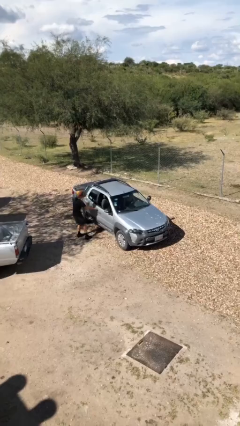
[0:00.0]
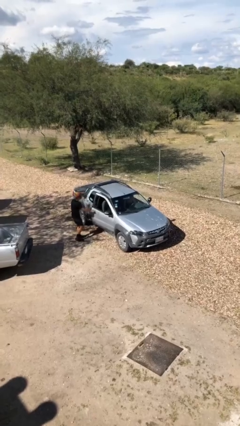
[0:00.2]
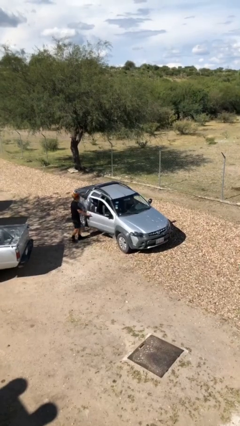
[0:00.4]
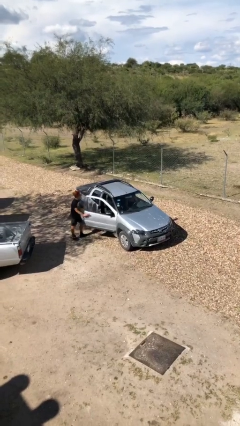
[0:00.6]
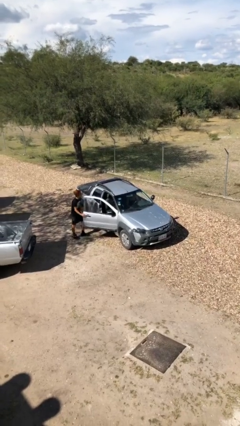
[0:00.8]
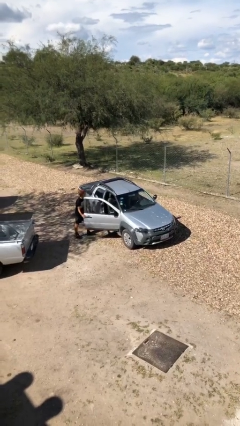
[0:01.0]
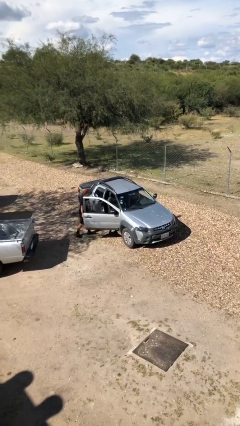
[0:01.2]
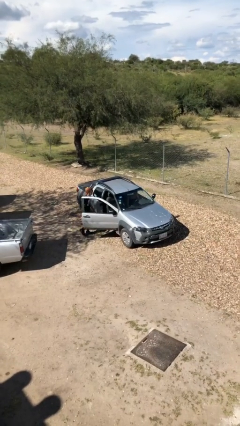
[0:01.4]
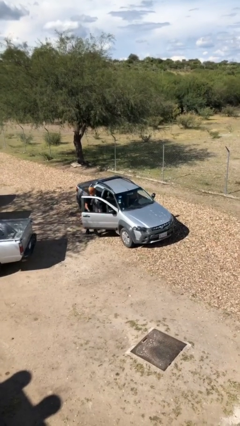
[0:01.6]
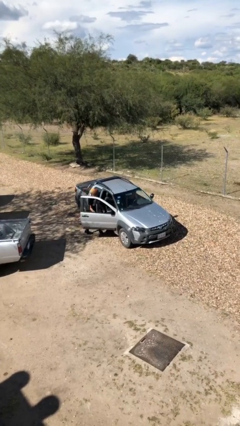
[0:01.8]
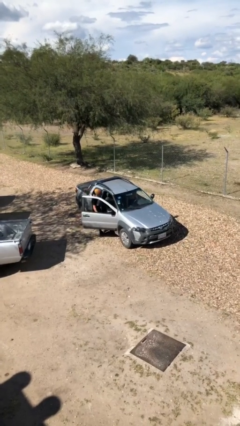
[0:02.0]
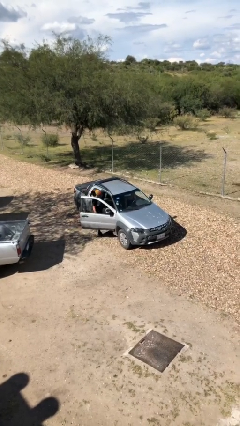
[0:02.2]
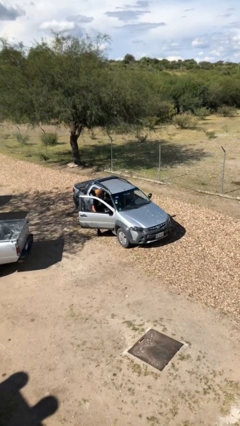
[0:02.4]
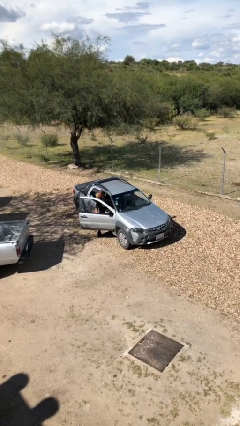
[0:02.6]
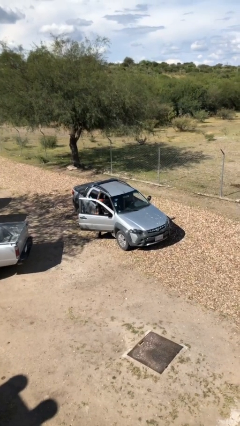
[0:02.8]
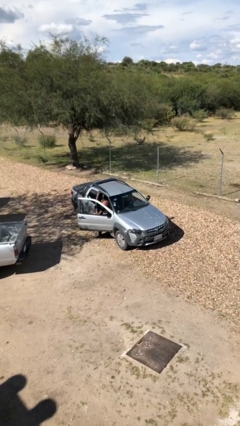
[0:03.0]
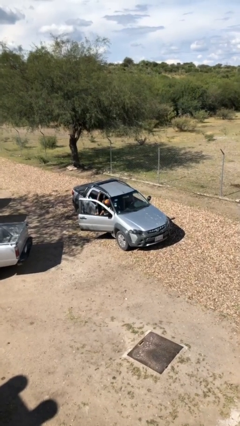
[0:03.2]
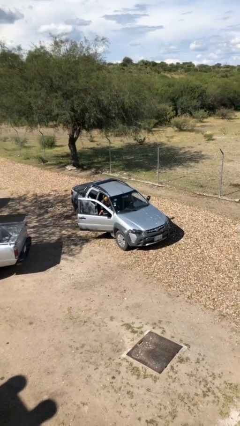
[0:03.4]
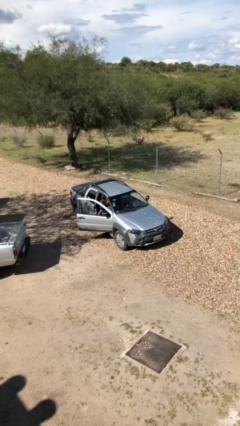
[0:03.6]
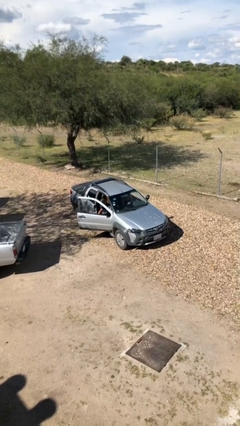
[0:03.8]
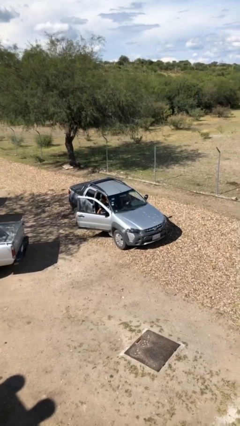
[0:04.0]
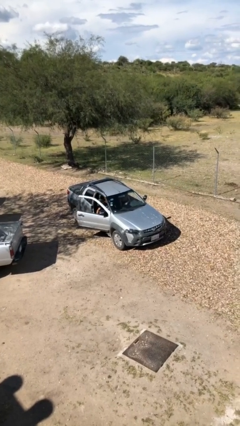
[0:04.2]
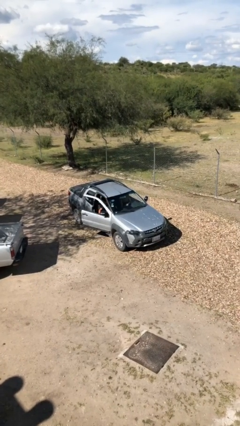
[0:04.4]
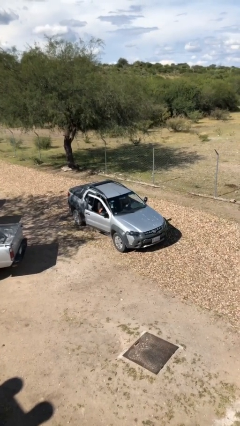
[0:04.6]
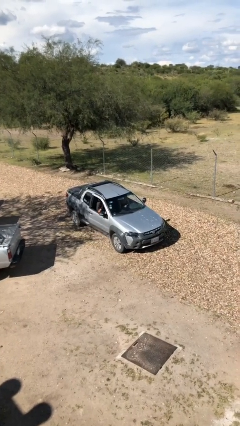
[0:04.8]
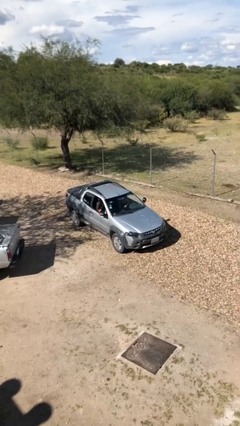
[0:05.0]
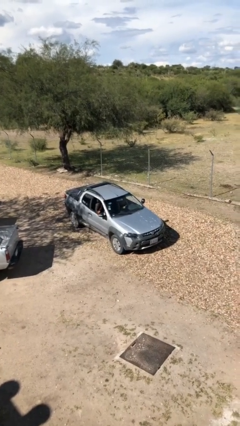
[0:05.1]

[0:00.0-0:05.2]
car picks up person

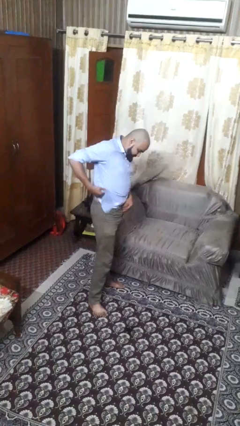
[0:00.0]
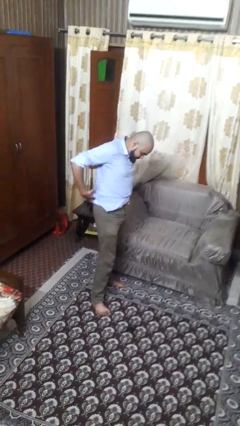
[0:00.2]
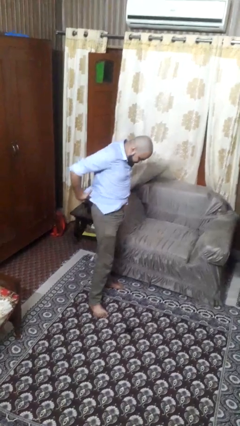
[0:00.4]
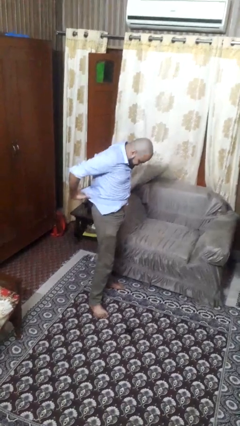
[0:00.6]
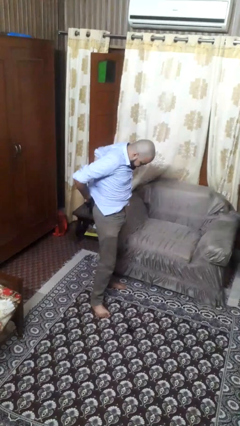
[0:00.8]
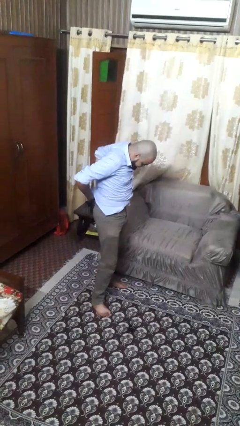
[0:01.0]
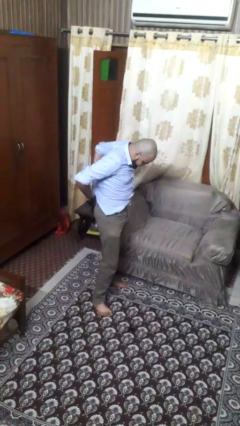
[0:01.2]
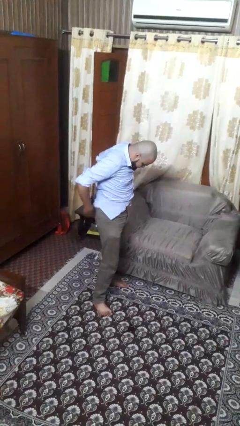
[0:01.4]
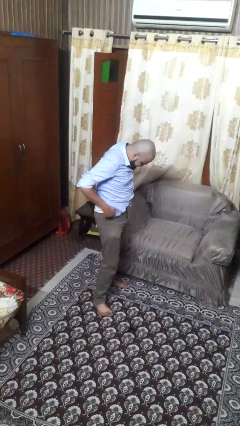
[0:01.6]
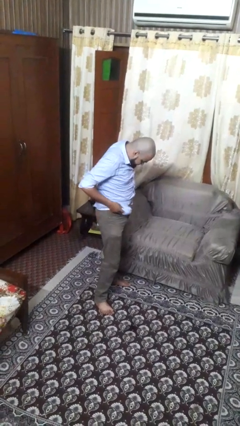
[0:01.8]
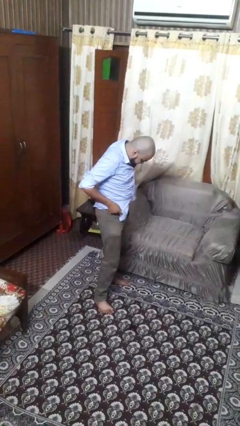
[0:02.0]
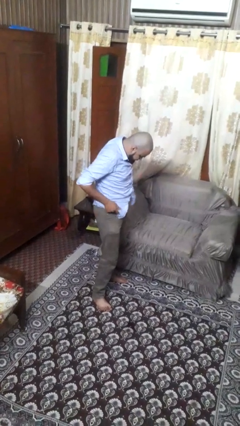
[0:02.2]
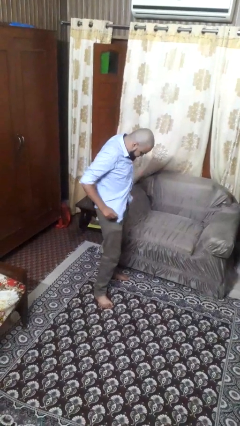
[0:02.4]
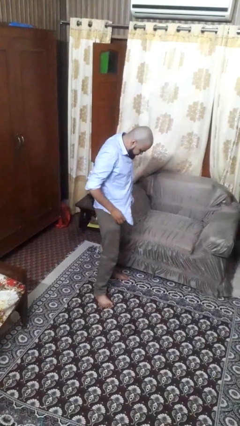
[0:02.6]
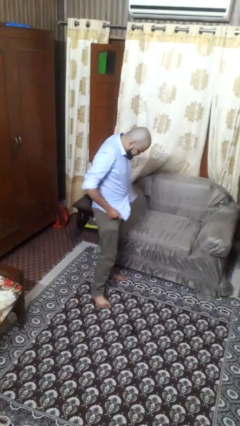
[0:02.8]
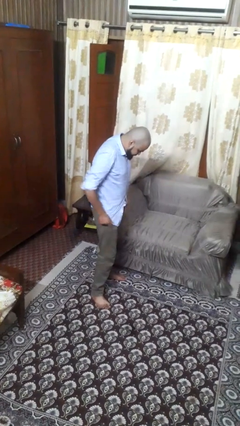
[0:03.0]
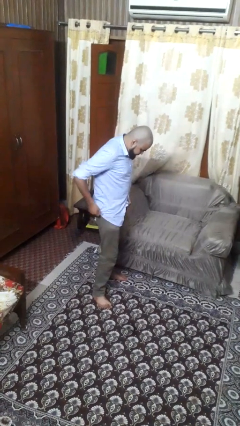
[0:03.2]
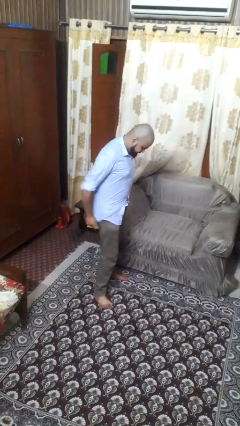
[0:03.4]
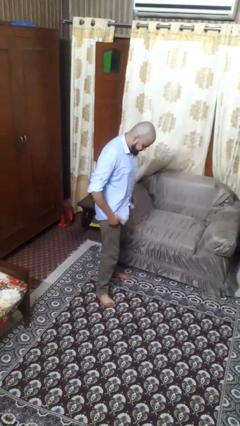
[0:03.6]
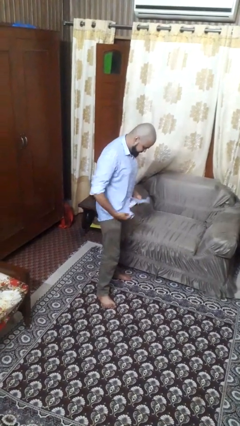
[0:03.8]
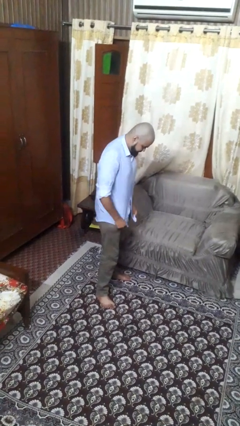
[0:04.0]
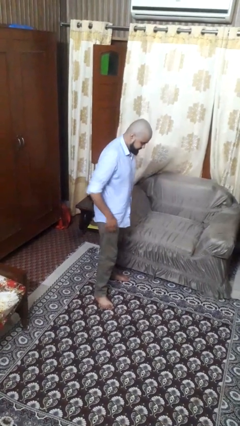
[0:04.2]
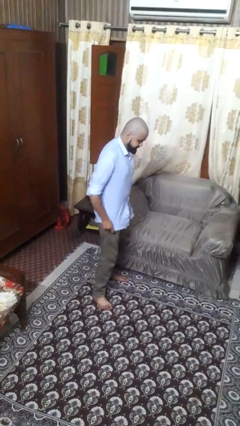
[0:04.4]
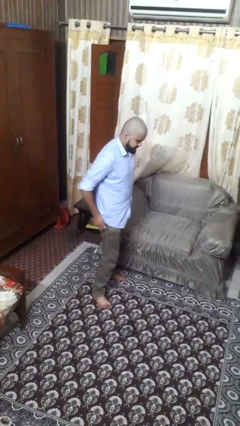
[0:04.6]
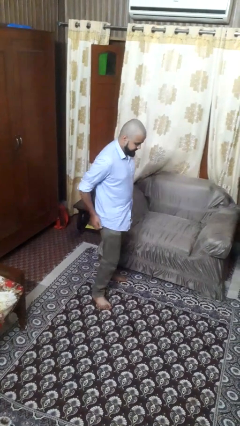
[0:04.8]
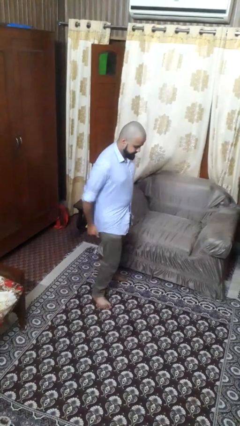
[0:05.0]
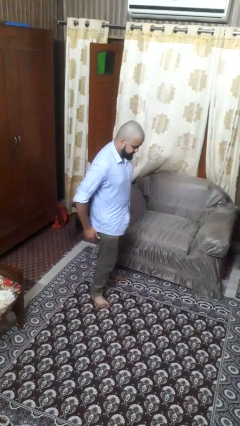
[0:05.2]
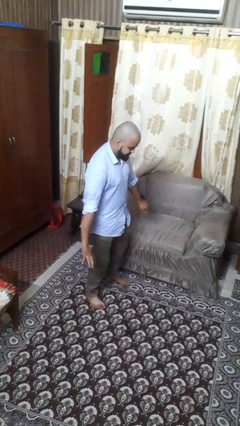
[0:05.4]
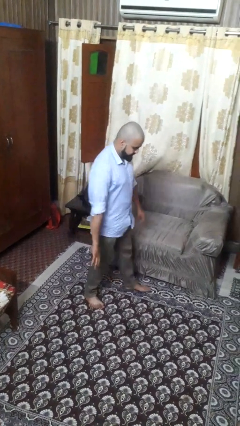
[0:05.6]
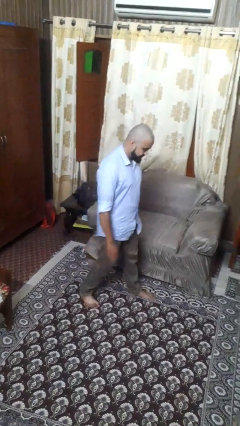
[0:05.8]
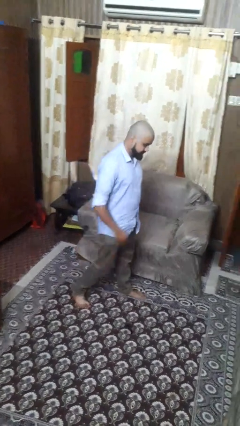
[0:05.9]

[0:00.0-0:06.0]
person untucks shirt

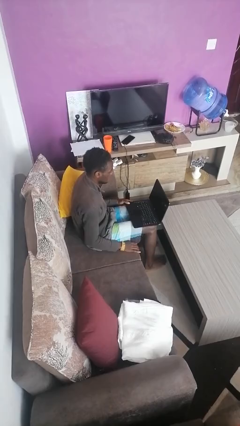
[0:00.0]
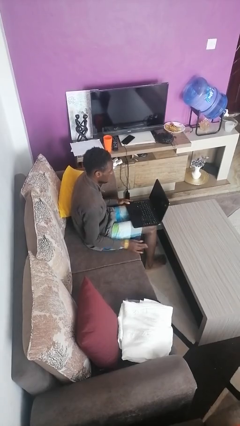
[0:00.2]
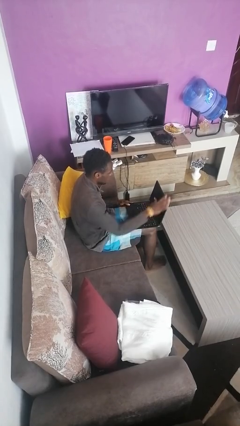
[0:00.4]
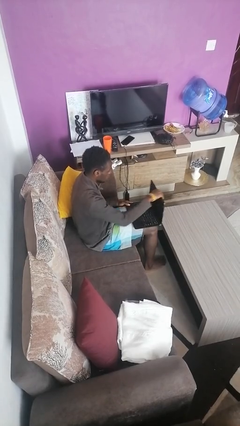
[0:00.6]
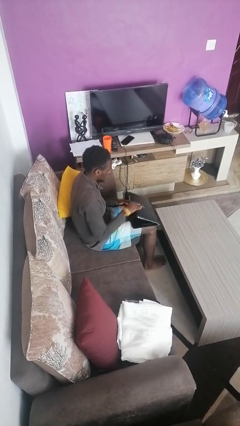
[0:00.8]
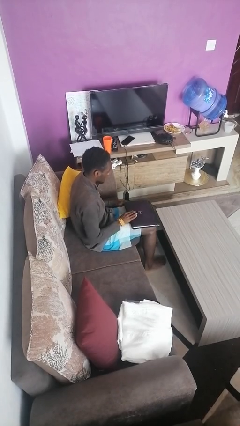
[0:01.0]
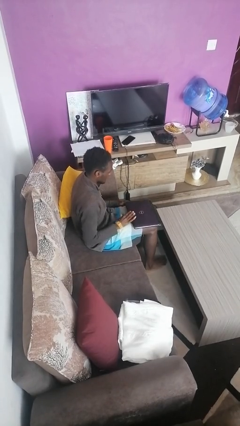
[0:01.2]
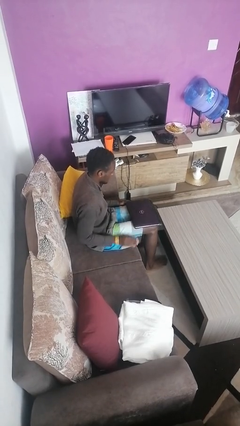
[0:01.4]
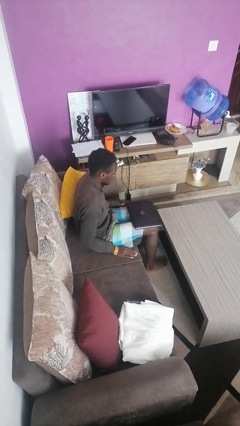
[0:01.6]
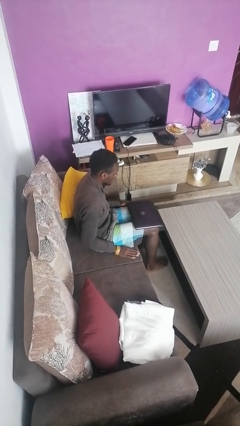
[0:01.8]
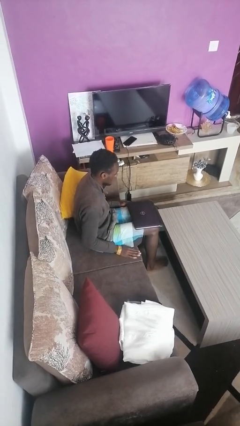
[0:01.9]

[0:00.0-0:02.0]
person closes laptop

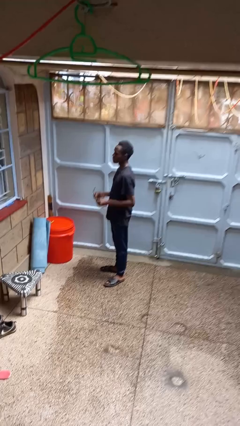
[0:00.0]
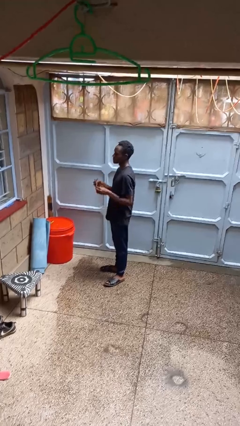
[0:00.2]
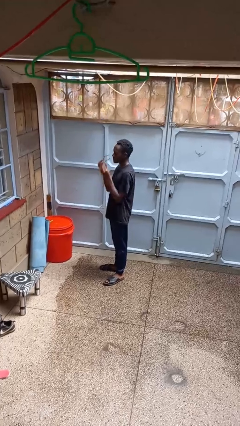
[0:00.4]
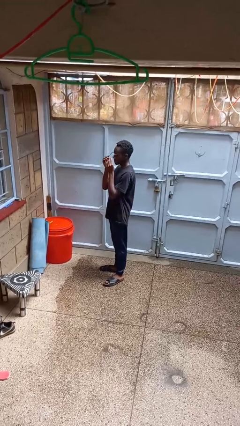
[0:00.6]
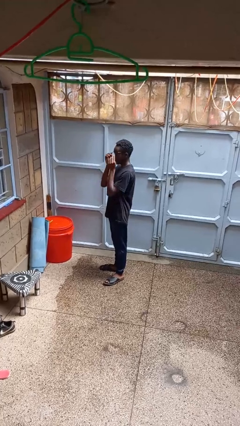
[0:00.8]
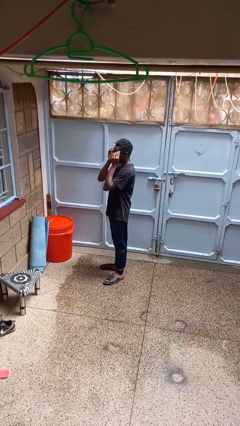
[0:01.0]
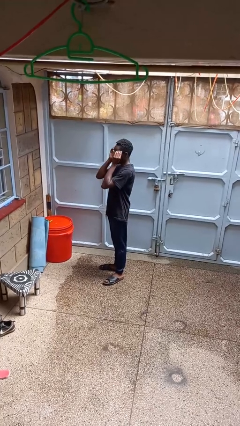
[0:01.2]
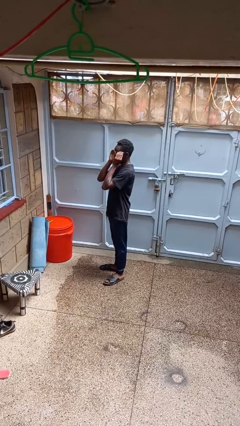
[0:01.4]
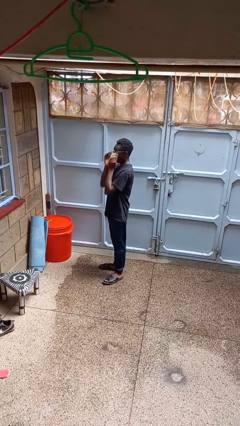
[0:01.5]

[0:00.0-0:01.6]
person puts on glasses

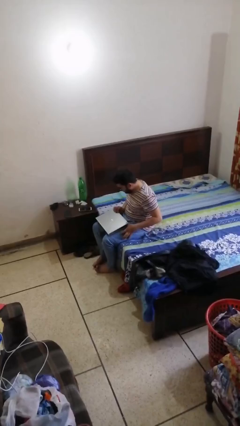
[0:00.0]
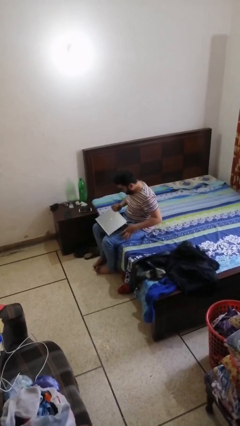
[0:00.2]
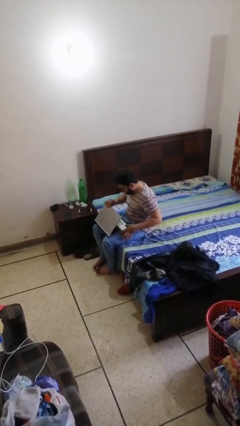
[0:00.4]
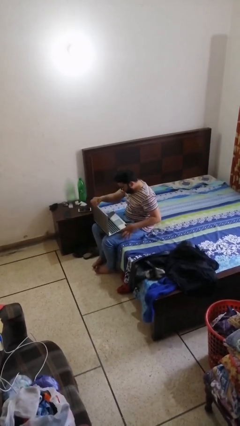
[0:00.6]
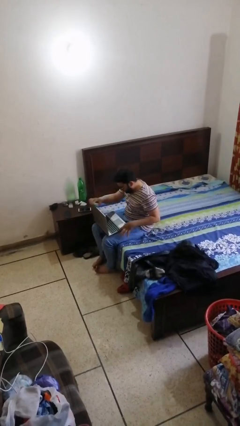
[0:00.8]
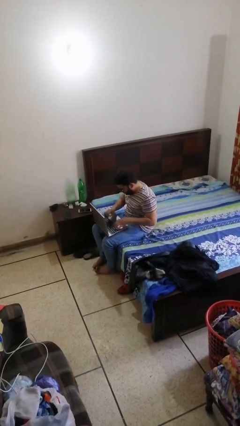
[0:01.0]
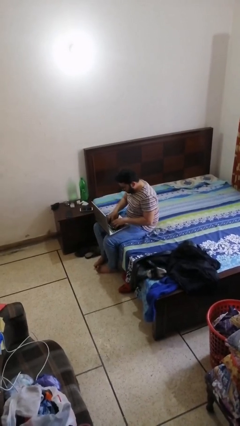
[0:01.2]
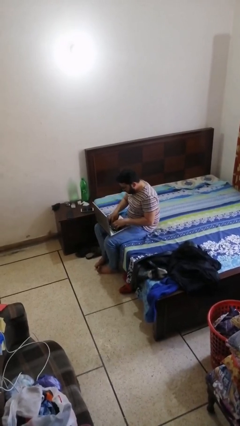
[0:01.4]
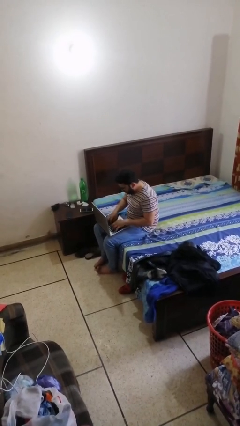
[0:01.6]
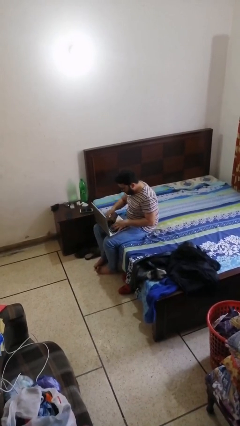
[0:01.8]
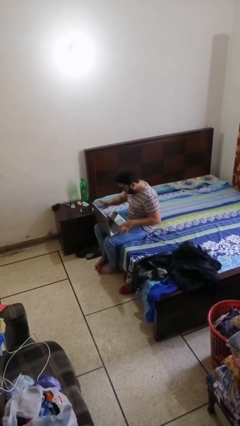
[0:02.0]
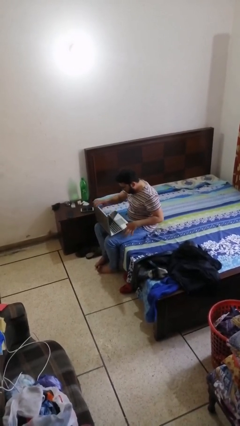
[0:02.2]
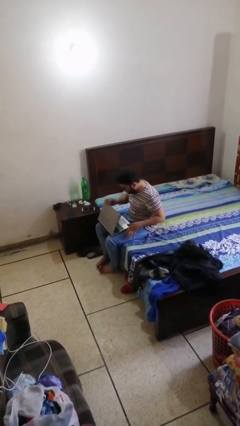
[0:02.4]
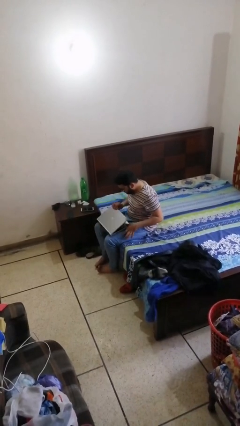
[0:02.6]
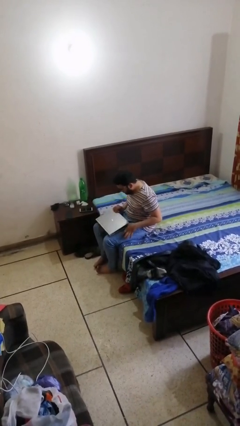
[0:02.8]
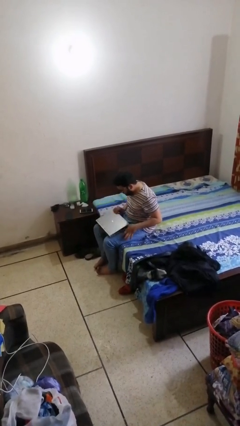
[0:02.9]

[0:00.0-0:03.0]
person interacts with laptop
